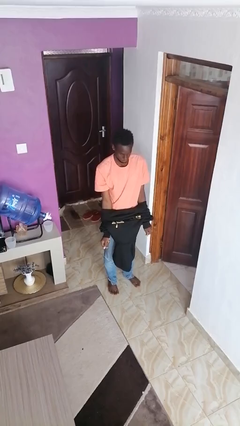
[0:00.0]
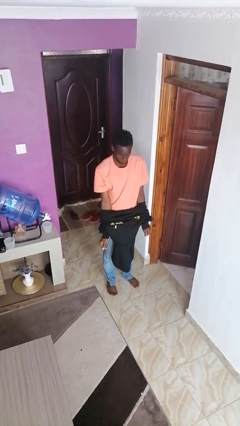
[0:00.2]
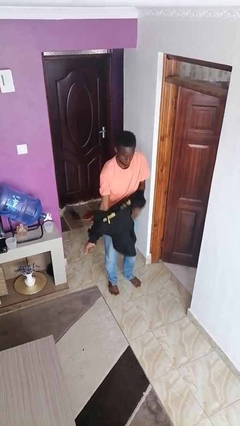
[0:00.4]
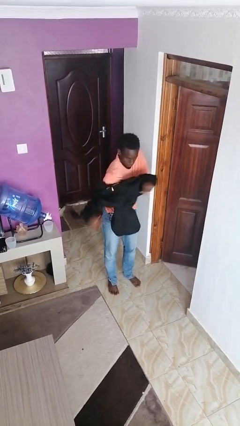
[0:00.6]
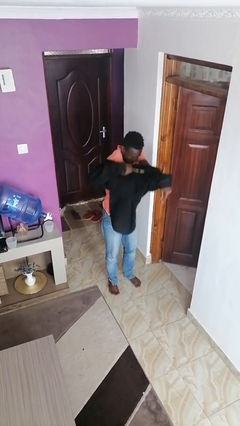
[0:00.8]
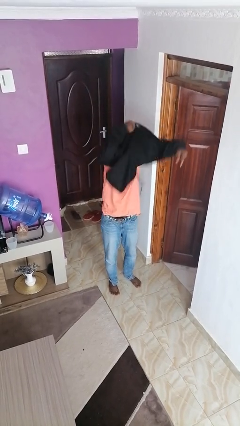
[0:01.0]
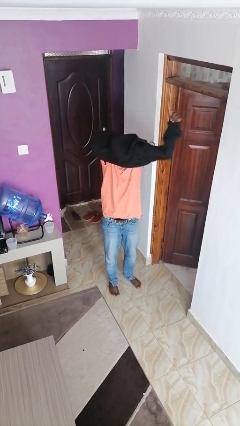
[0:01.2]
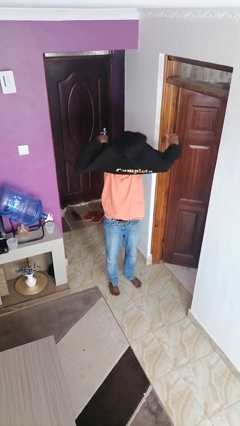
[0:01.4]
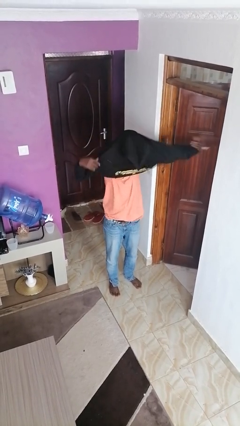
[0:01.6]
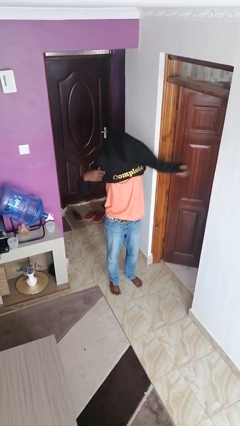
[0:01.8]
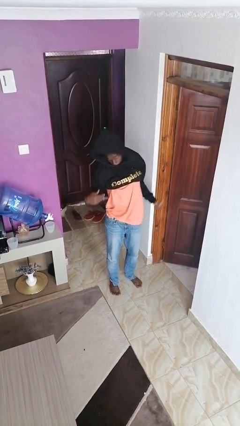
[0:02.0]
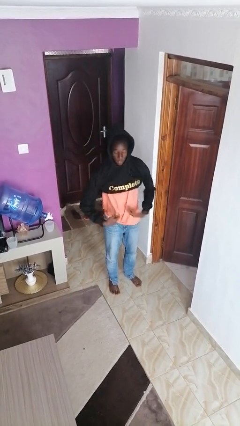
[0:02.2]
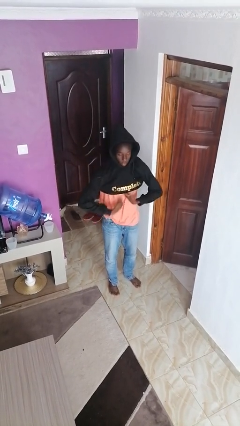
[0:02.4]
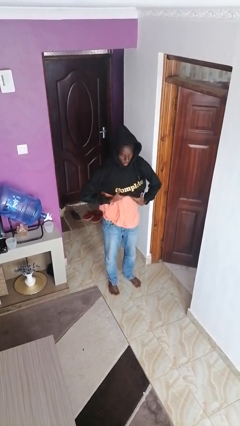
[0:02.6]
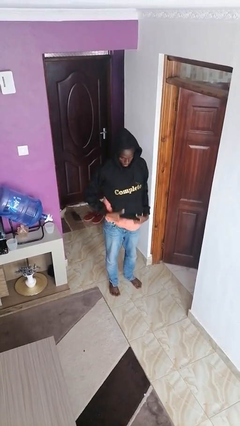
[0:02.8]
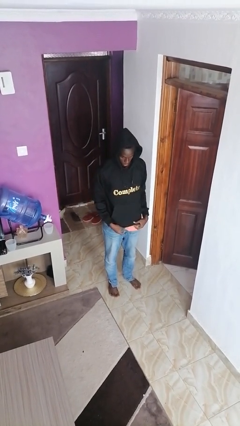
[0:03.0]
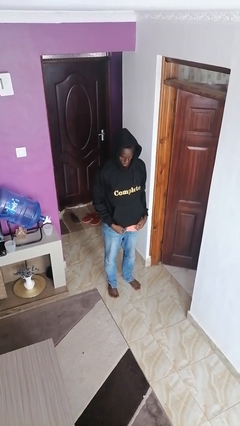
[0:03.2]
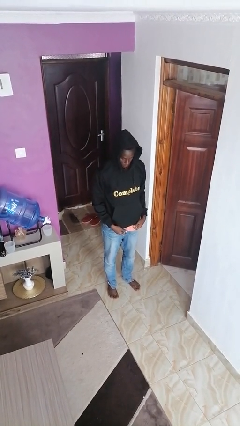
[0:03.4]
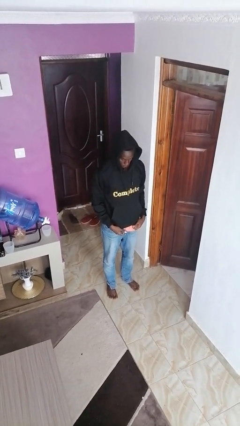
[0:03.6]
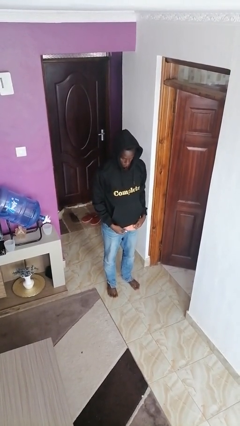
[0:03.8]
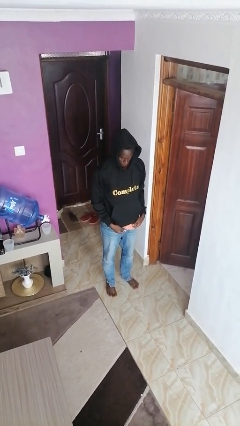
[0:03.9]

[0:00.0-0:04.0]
person puts on hoodie

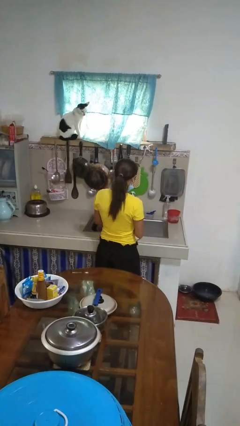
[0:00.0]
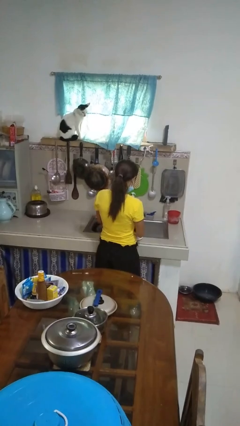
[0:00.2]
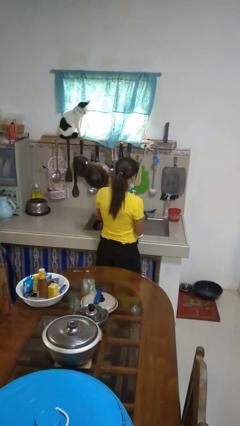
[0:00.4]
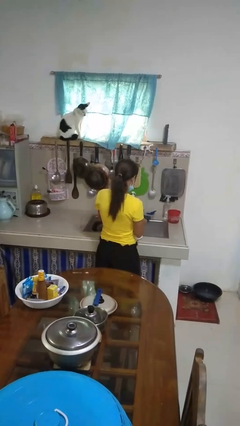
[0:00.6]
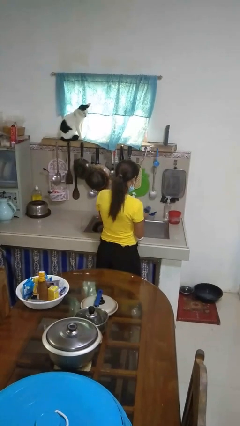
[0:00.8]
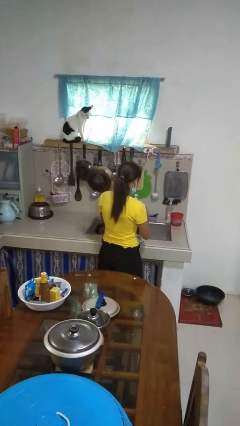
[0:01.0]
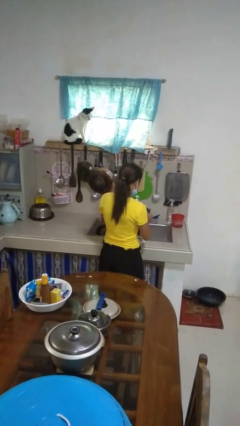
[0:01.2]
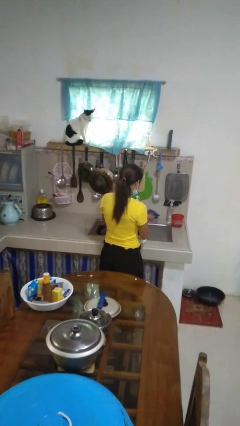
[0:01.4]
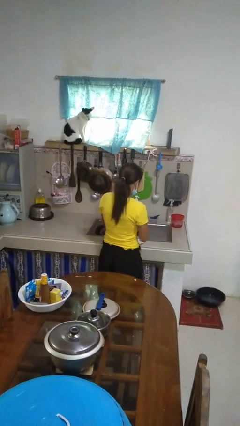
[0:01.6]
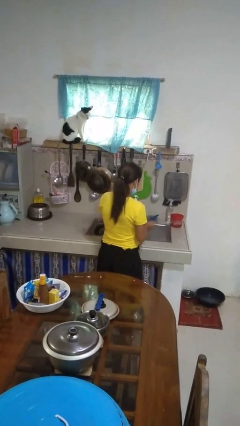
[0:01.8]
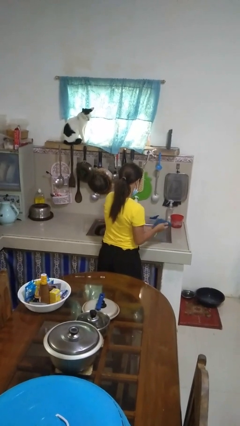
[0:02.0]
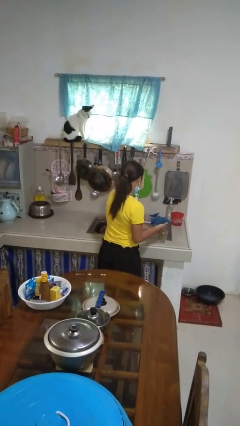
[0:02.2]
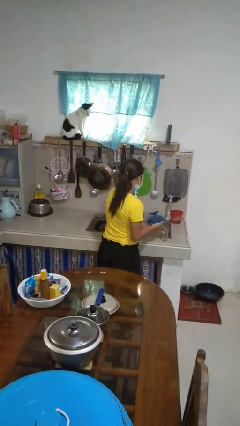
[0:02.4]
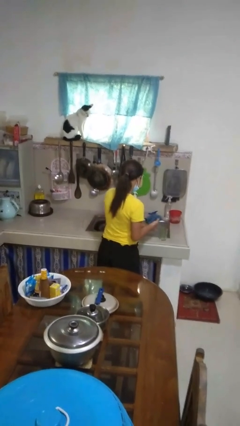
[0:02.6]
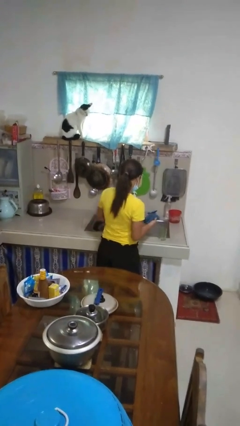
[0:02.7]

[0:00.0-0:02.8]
person dries dish

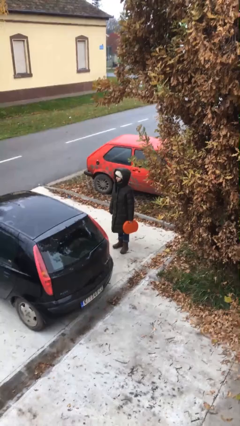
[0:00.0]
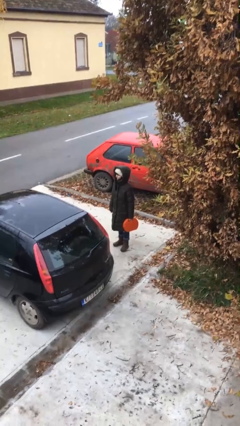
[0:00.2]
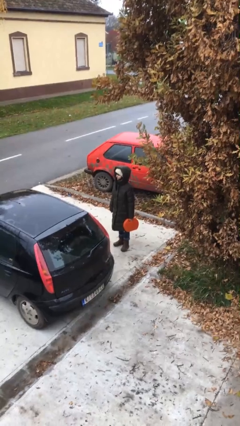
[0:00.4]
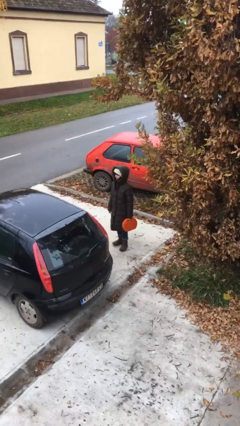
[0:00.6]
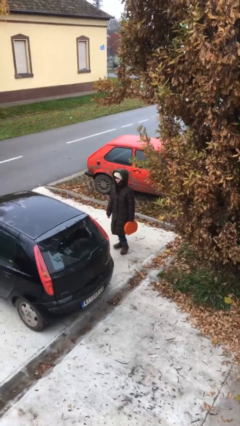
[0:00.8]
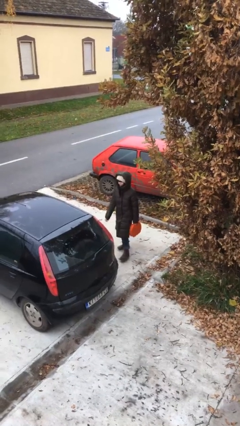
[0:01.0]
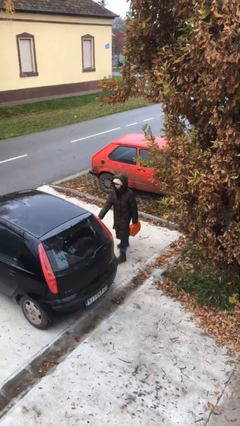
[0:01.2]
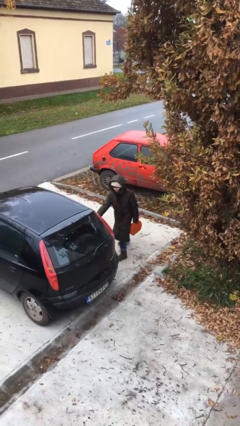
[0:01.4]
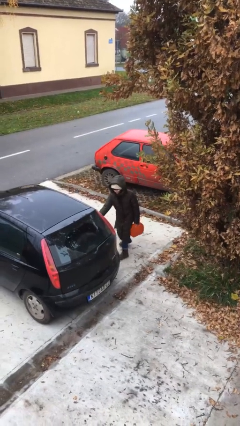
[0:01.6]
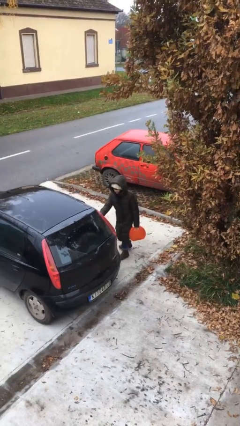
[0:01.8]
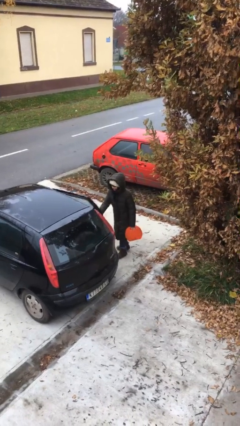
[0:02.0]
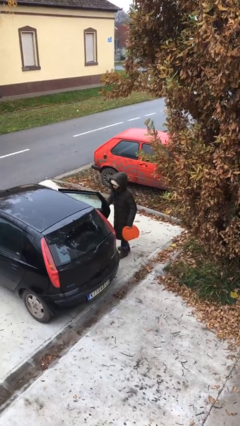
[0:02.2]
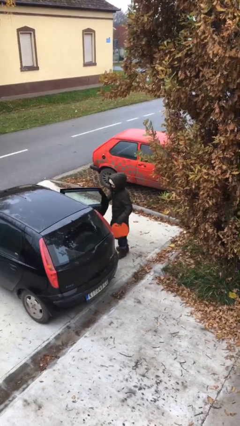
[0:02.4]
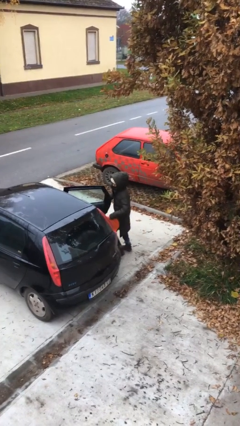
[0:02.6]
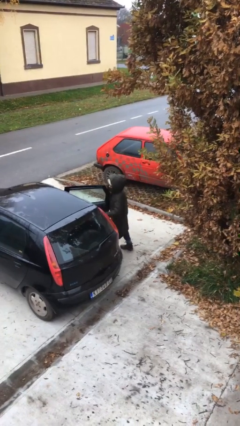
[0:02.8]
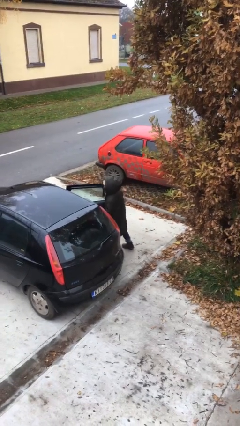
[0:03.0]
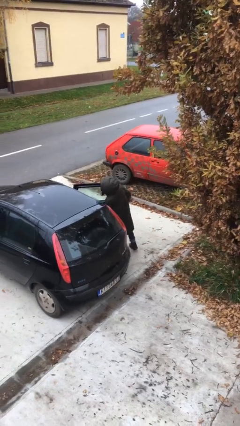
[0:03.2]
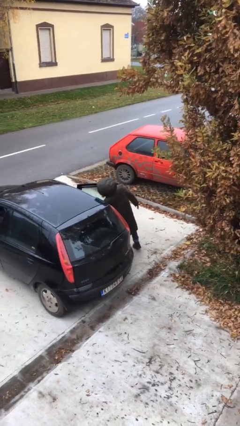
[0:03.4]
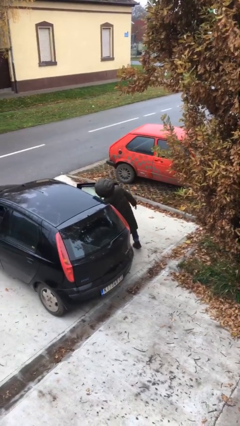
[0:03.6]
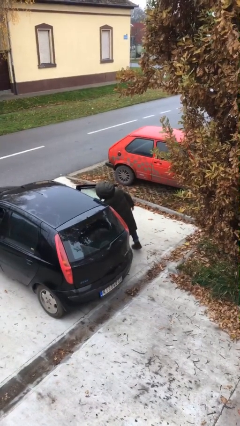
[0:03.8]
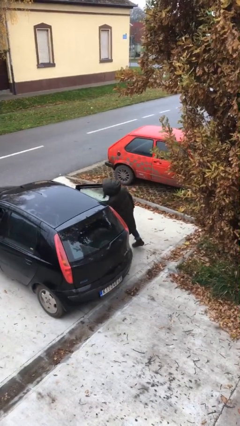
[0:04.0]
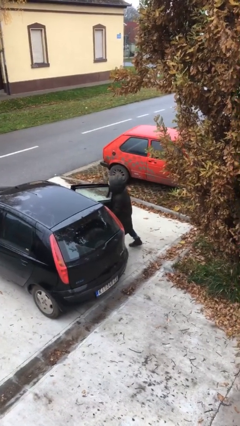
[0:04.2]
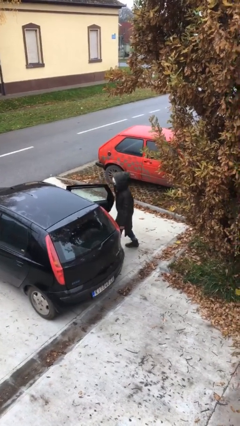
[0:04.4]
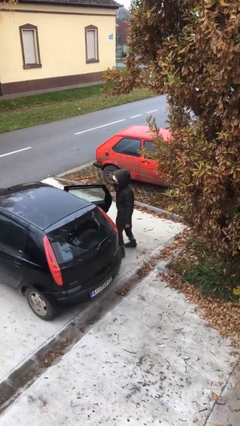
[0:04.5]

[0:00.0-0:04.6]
person loads car

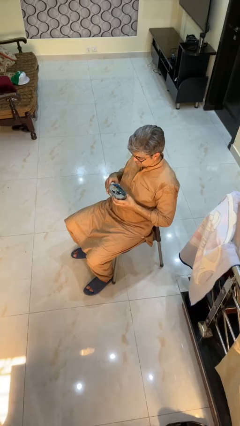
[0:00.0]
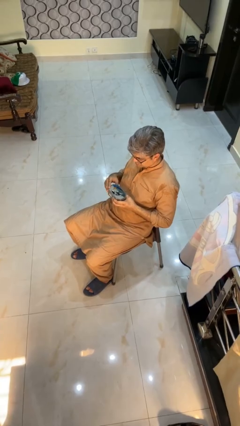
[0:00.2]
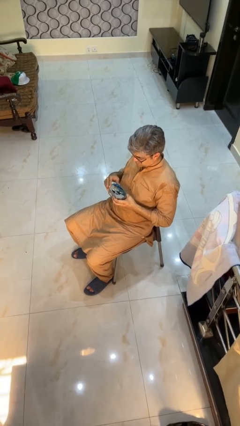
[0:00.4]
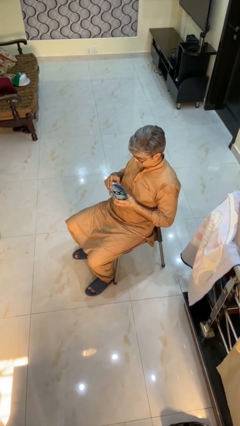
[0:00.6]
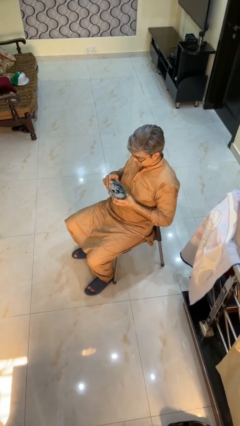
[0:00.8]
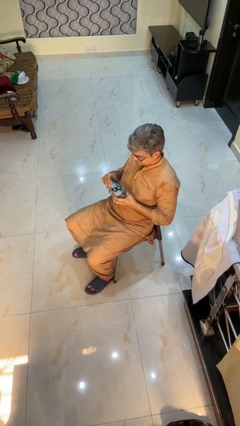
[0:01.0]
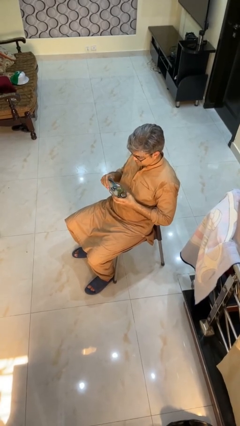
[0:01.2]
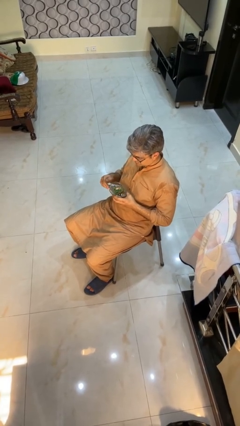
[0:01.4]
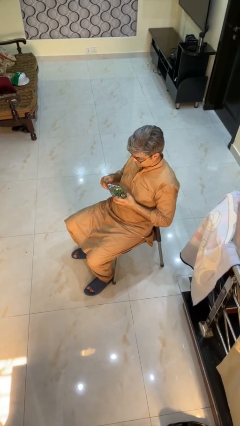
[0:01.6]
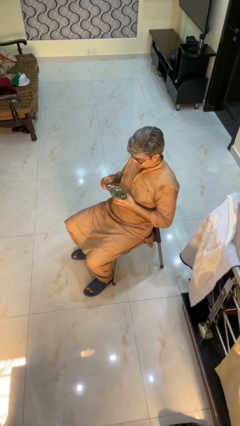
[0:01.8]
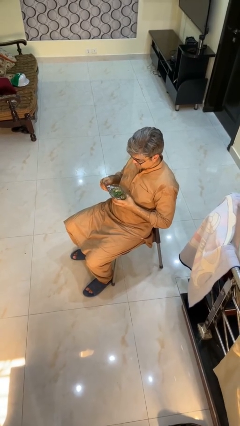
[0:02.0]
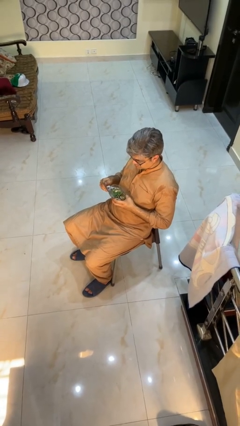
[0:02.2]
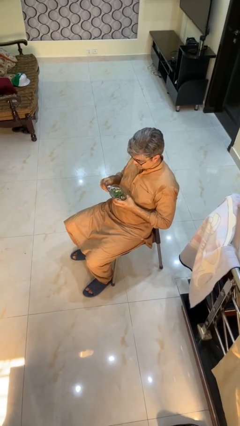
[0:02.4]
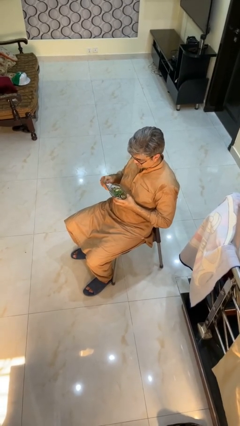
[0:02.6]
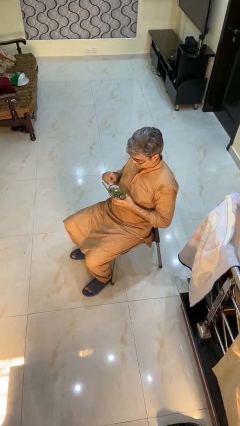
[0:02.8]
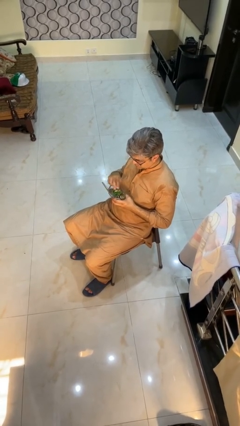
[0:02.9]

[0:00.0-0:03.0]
person opens jewelry box

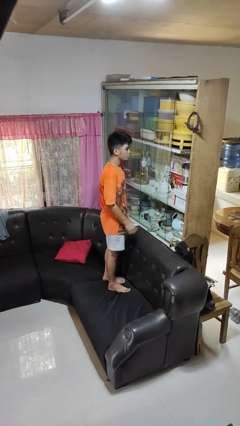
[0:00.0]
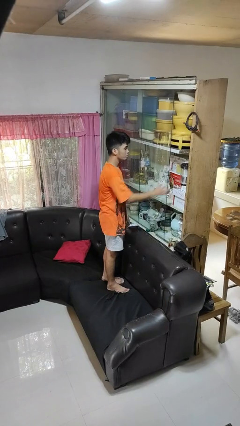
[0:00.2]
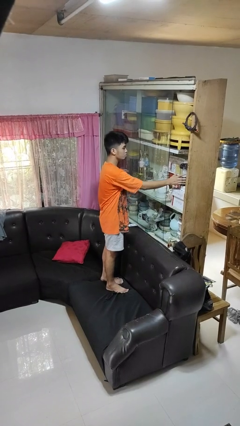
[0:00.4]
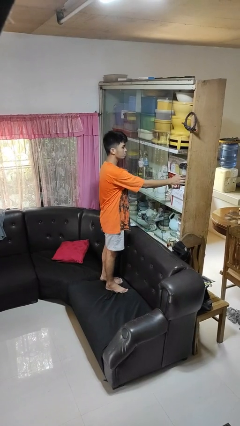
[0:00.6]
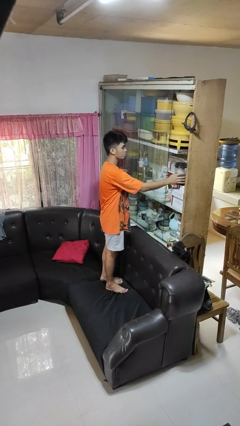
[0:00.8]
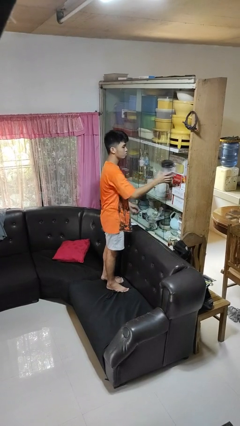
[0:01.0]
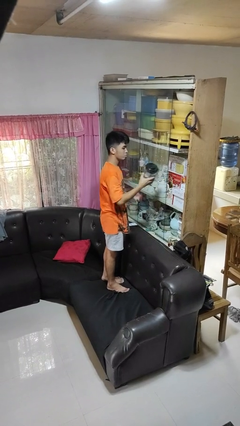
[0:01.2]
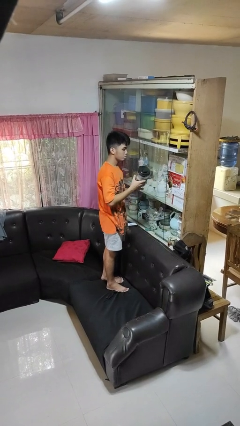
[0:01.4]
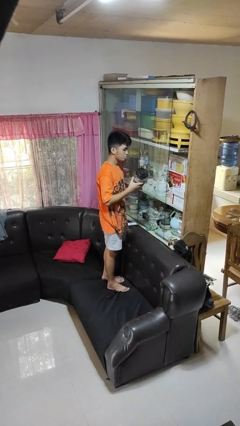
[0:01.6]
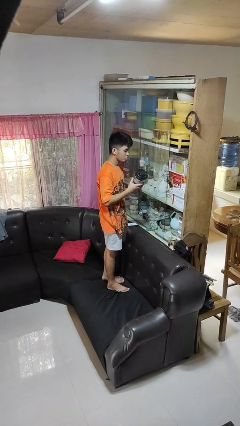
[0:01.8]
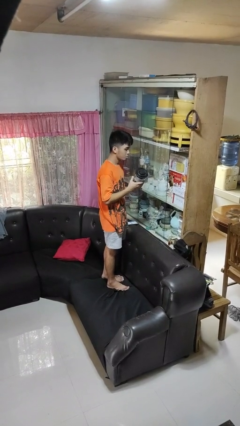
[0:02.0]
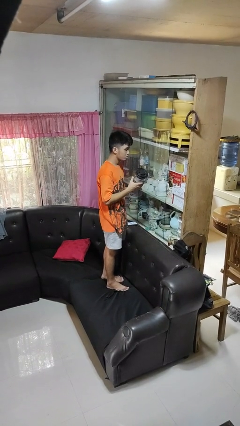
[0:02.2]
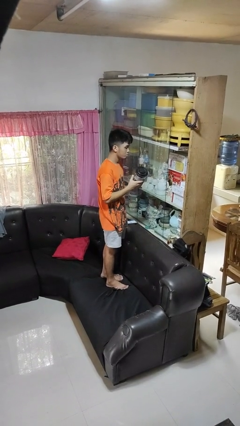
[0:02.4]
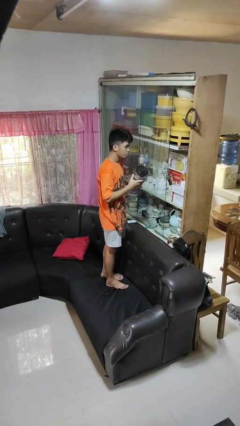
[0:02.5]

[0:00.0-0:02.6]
person picks up object from cabinet
